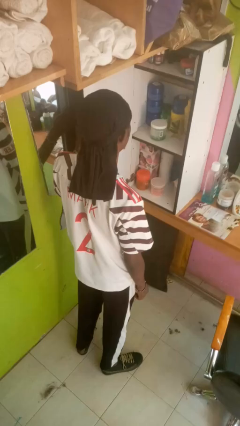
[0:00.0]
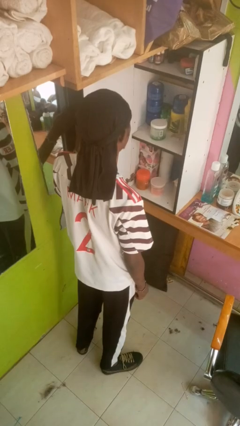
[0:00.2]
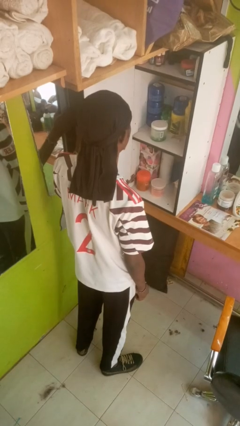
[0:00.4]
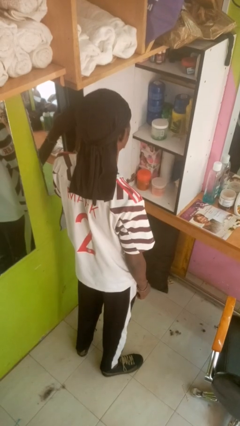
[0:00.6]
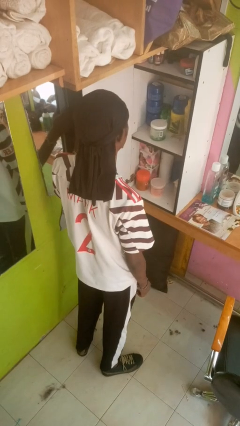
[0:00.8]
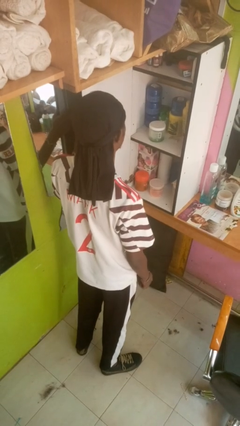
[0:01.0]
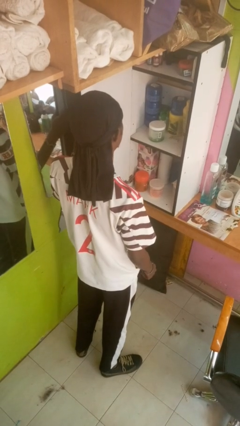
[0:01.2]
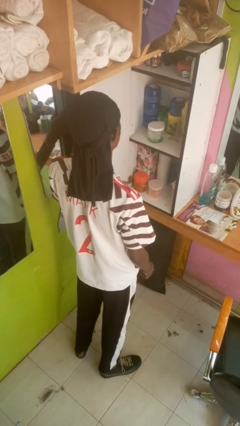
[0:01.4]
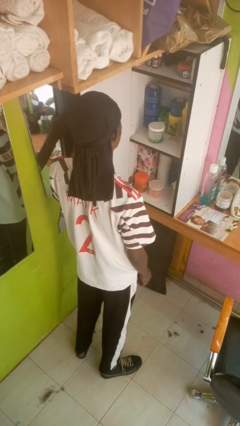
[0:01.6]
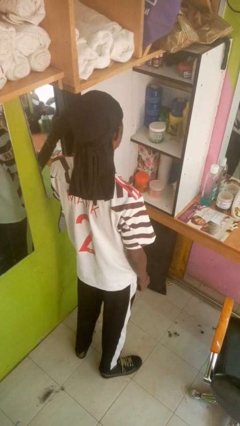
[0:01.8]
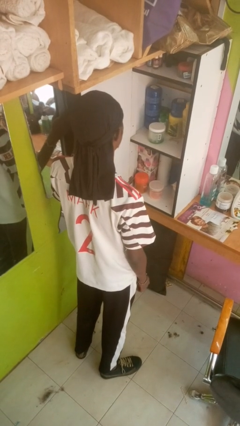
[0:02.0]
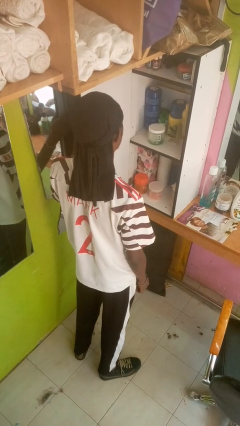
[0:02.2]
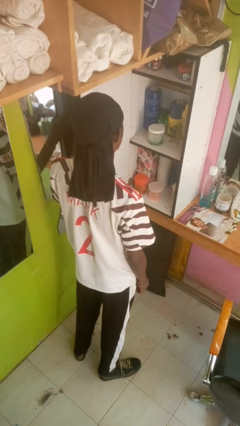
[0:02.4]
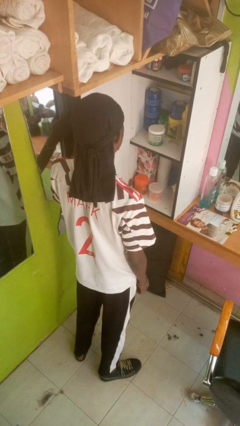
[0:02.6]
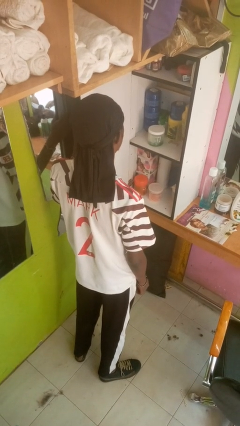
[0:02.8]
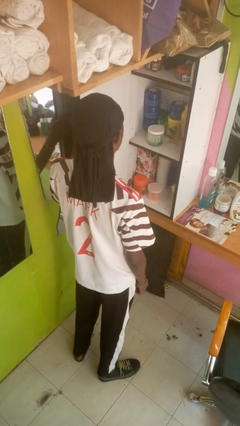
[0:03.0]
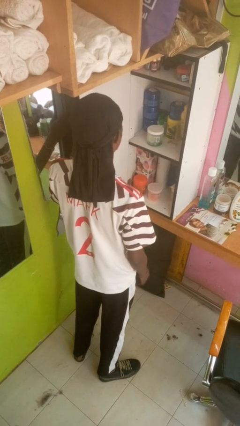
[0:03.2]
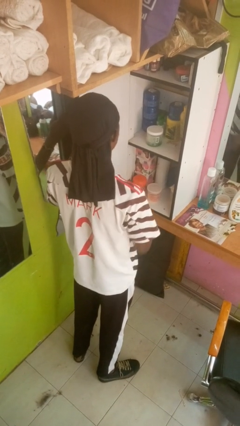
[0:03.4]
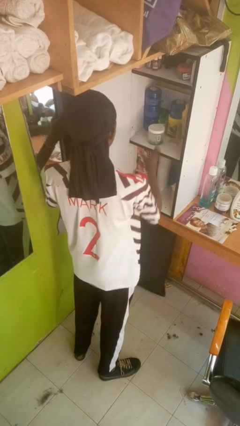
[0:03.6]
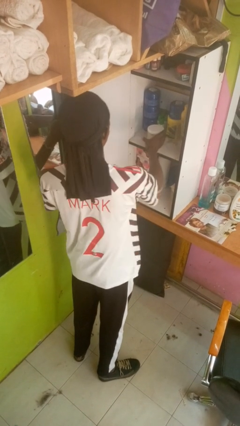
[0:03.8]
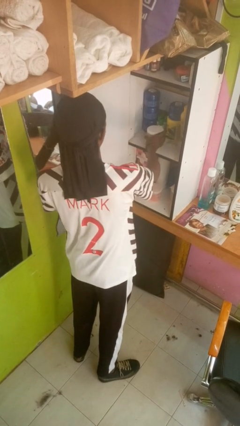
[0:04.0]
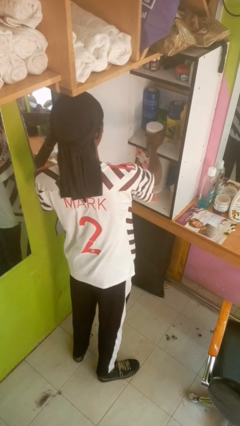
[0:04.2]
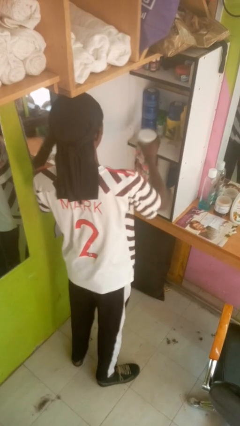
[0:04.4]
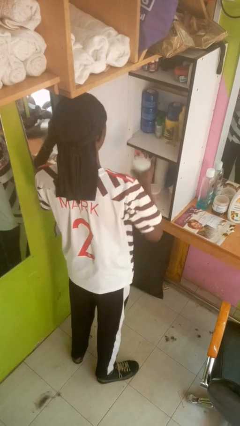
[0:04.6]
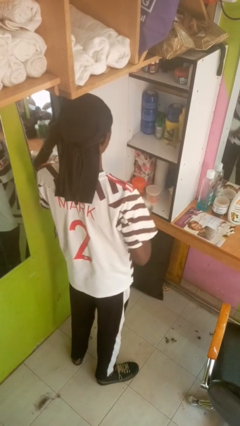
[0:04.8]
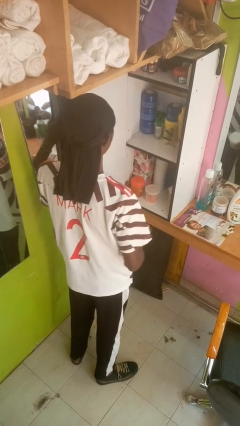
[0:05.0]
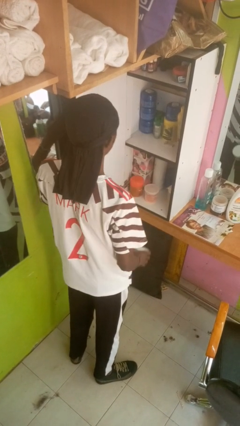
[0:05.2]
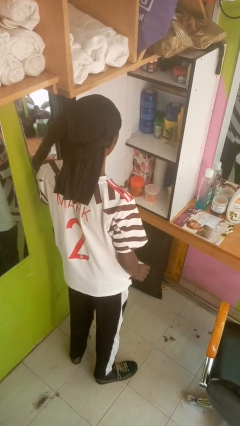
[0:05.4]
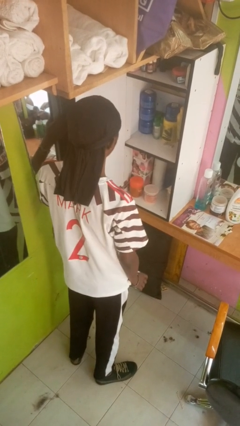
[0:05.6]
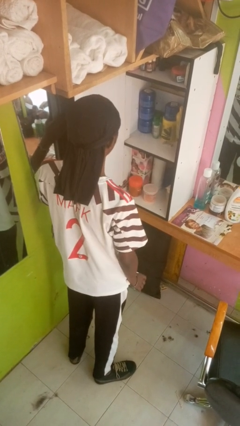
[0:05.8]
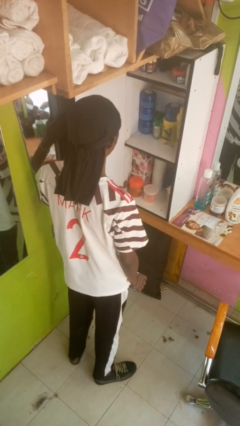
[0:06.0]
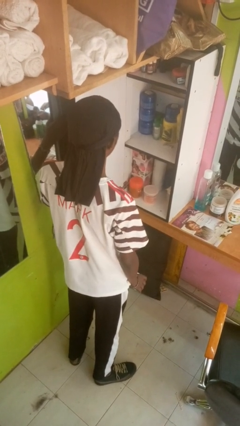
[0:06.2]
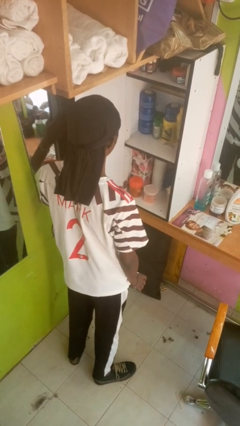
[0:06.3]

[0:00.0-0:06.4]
person picks up object from cabinet

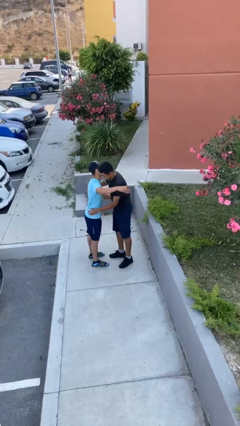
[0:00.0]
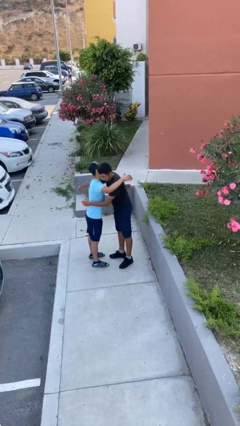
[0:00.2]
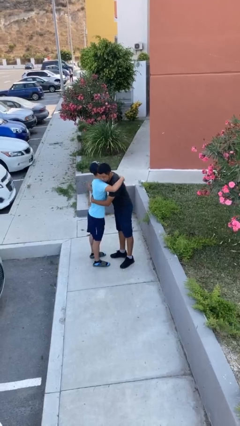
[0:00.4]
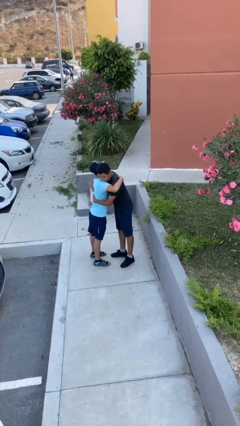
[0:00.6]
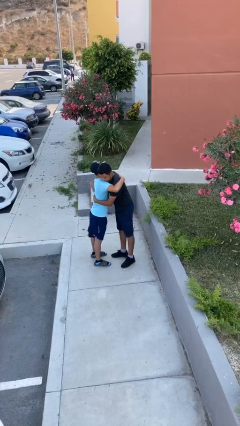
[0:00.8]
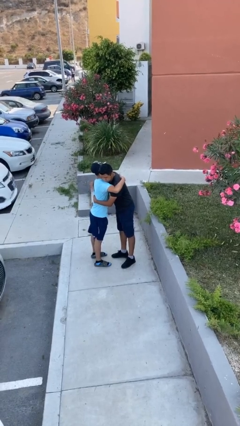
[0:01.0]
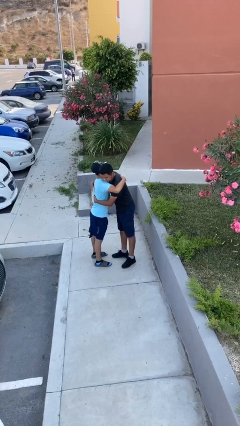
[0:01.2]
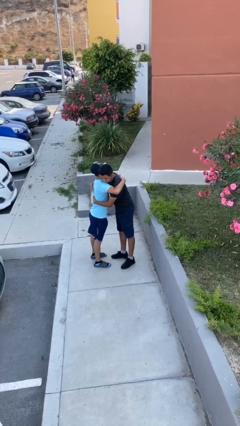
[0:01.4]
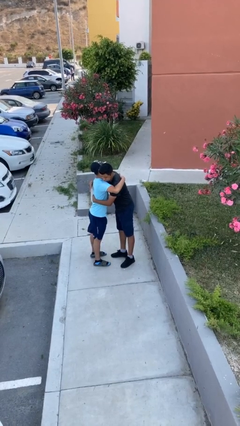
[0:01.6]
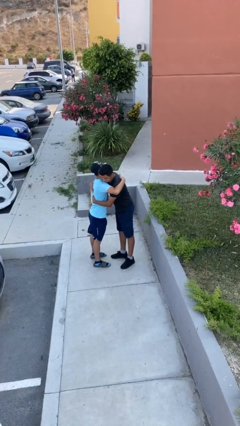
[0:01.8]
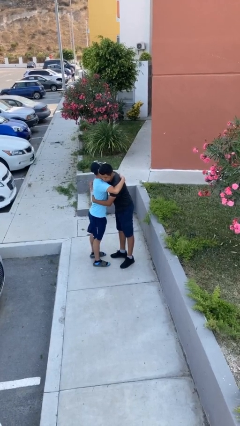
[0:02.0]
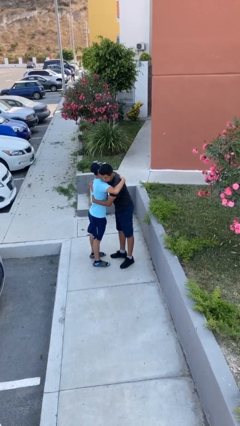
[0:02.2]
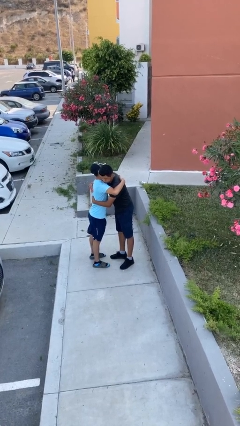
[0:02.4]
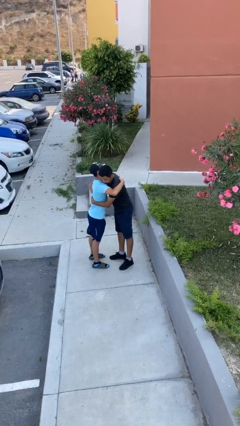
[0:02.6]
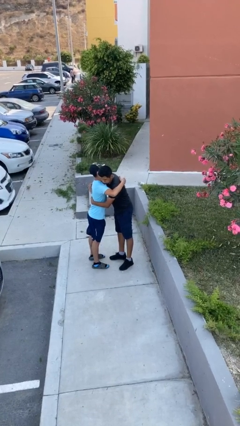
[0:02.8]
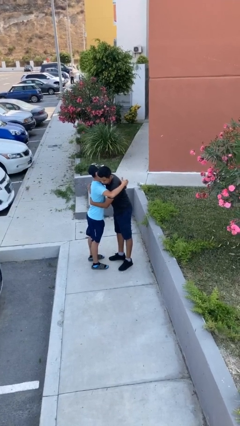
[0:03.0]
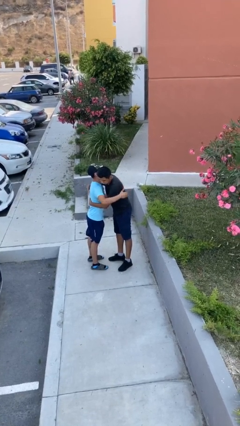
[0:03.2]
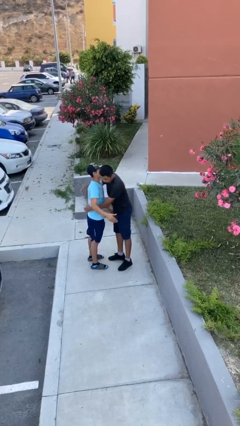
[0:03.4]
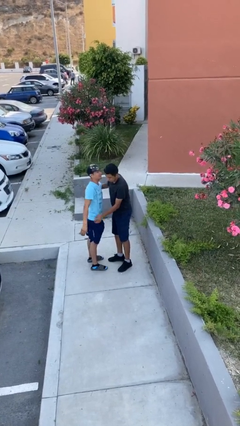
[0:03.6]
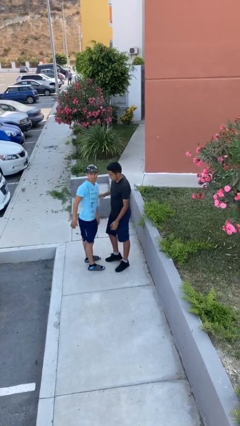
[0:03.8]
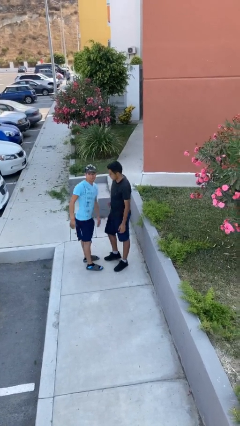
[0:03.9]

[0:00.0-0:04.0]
person embraces person

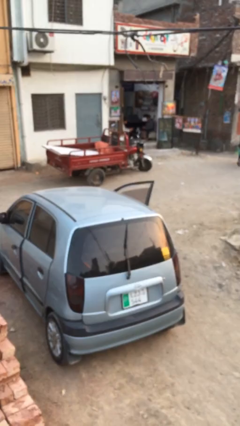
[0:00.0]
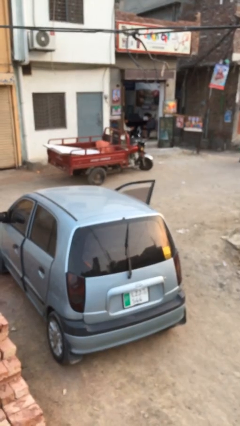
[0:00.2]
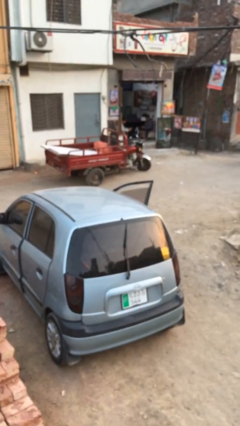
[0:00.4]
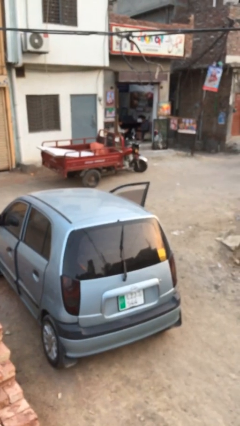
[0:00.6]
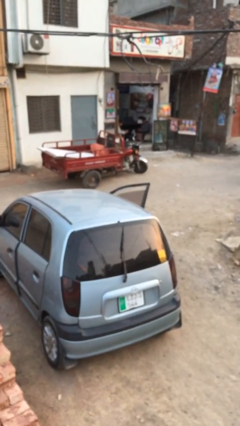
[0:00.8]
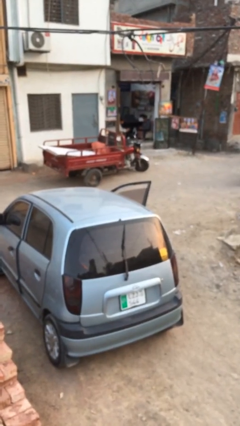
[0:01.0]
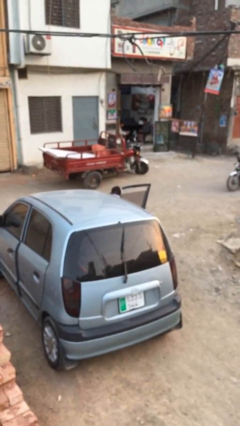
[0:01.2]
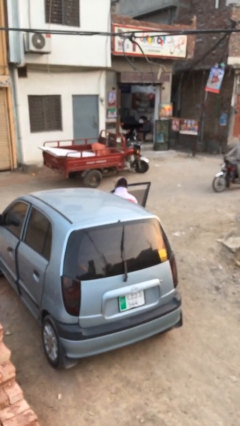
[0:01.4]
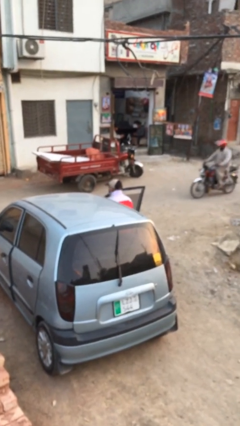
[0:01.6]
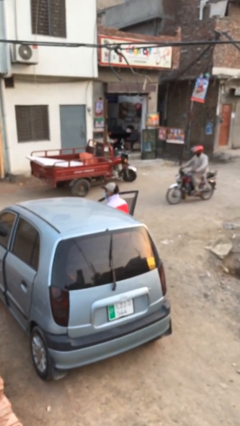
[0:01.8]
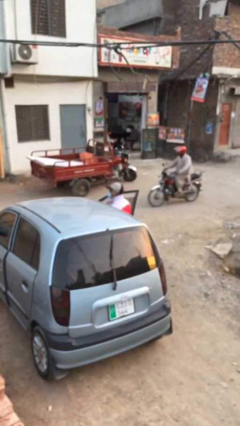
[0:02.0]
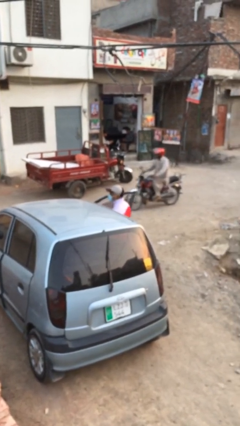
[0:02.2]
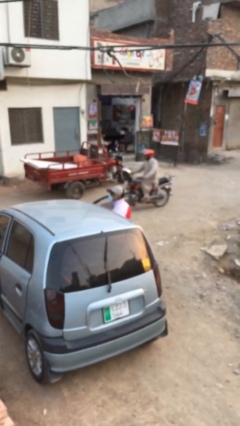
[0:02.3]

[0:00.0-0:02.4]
person exits car

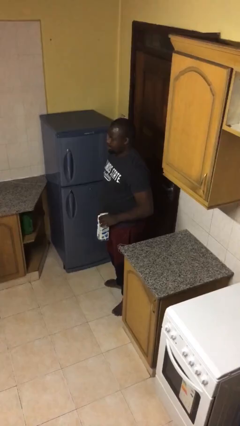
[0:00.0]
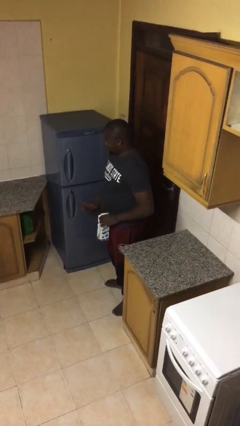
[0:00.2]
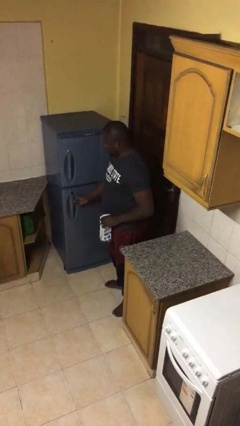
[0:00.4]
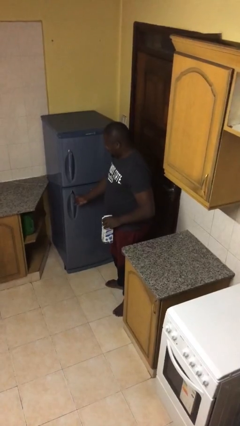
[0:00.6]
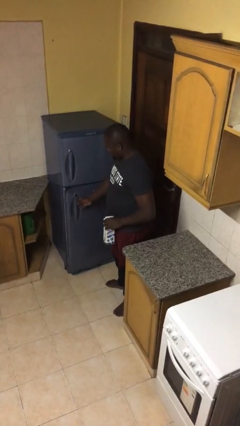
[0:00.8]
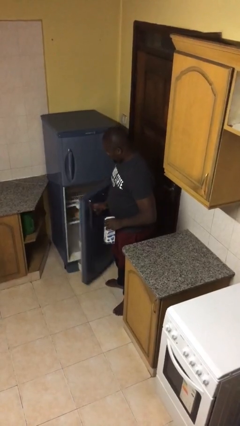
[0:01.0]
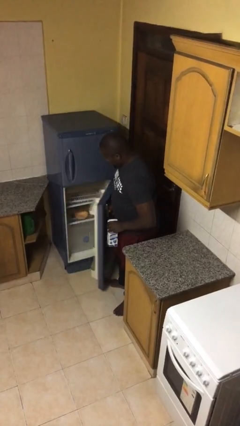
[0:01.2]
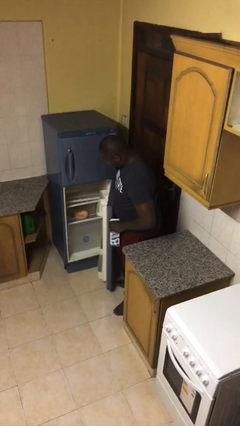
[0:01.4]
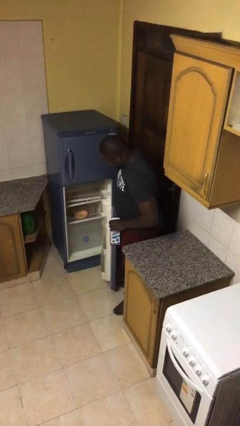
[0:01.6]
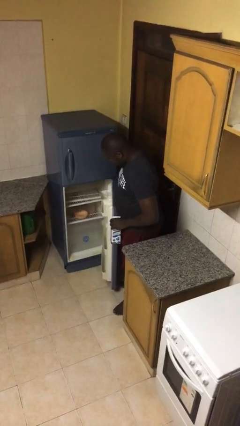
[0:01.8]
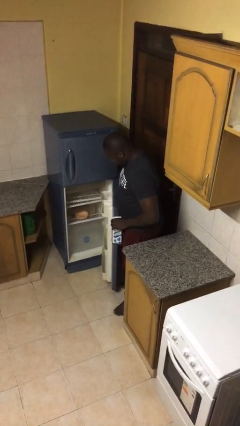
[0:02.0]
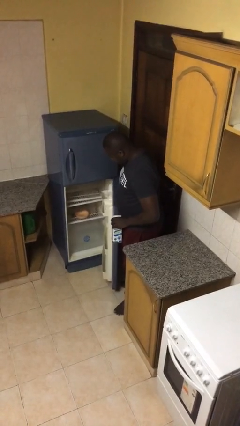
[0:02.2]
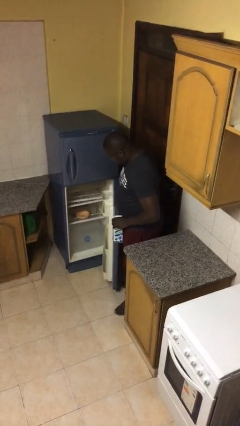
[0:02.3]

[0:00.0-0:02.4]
person opens refrigerator

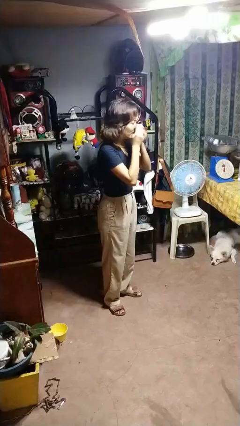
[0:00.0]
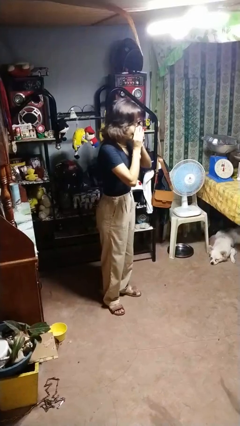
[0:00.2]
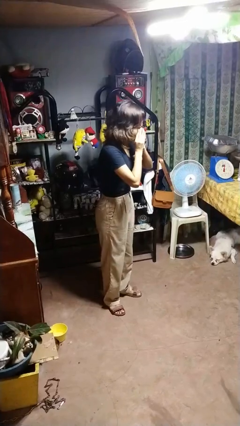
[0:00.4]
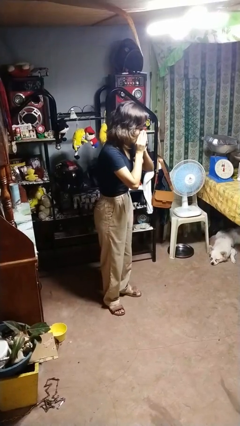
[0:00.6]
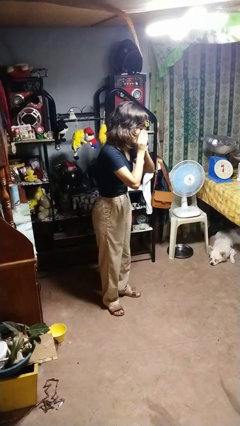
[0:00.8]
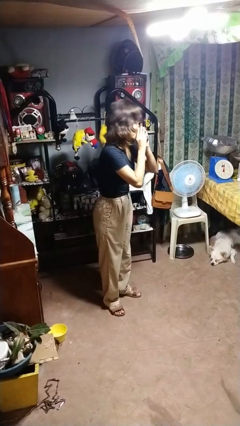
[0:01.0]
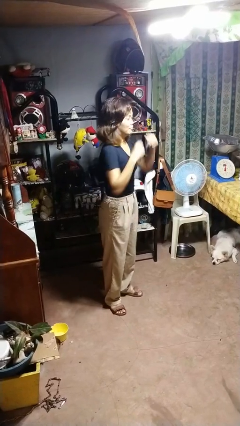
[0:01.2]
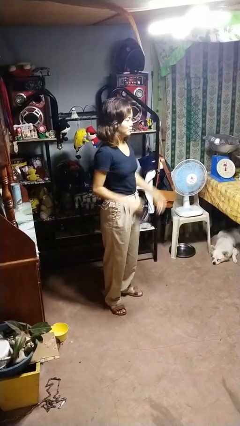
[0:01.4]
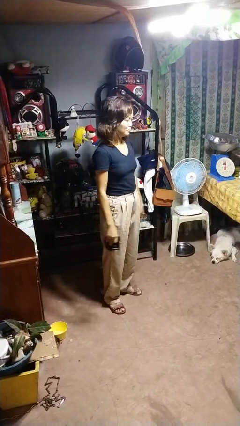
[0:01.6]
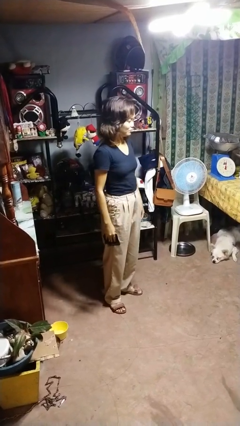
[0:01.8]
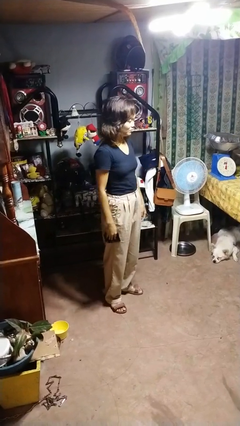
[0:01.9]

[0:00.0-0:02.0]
person blows nose

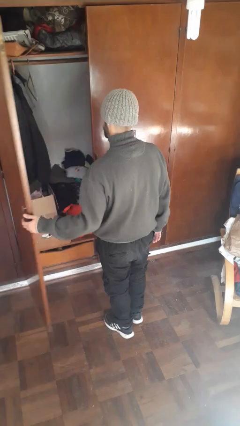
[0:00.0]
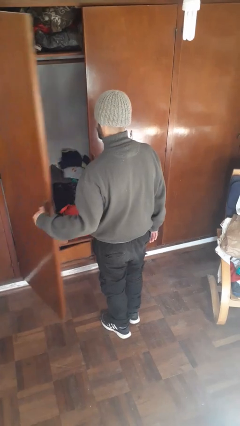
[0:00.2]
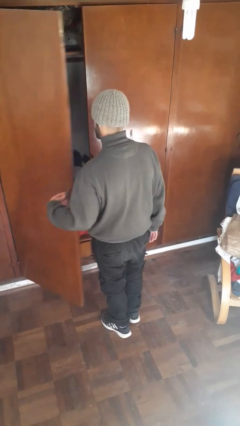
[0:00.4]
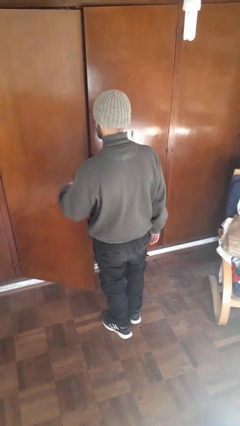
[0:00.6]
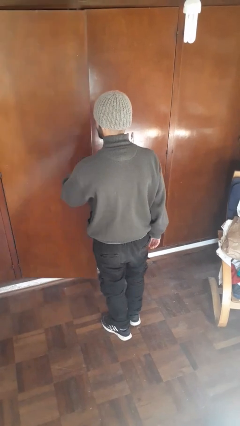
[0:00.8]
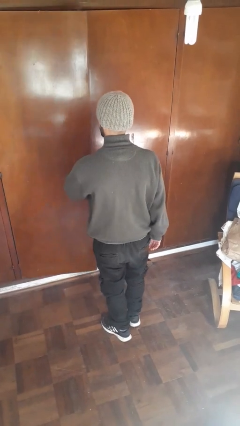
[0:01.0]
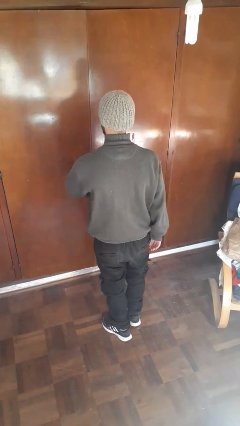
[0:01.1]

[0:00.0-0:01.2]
person closes closet door
